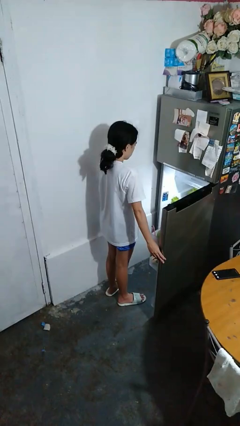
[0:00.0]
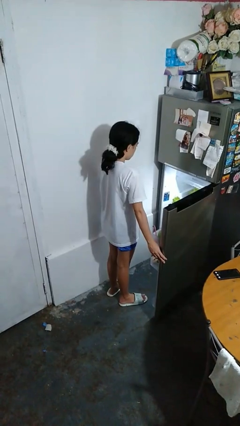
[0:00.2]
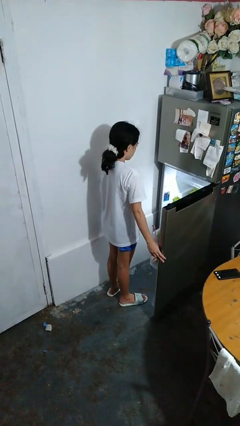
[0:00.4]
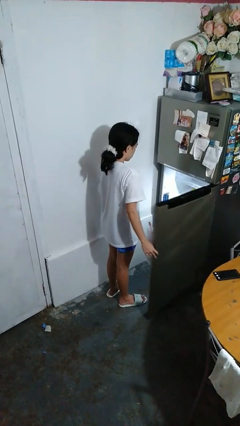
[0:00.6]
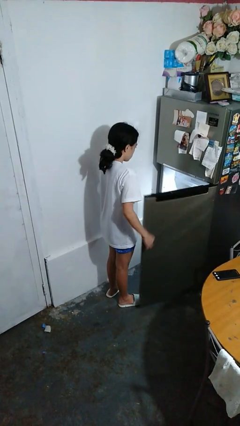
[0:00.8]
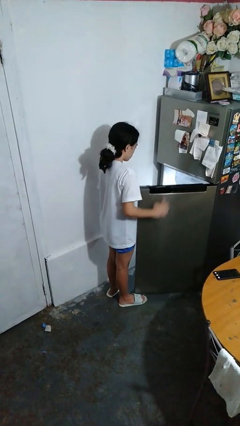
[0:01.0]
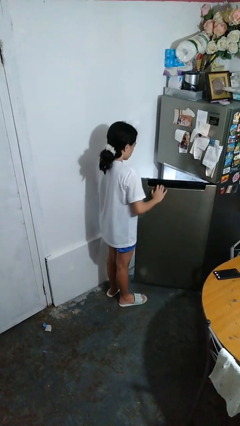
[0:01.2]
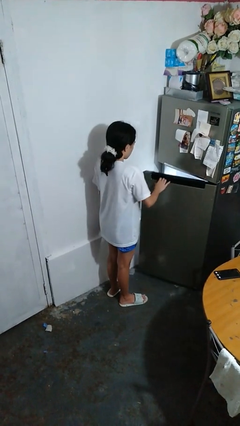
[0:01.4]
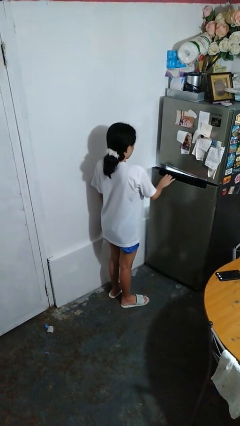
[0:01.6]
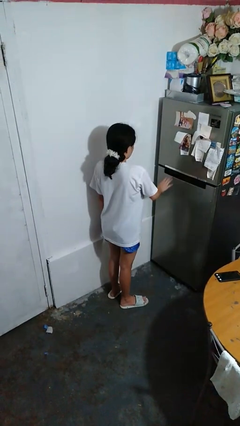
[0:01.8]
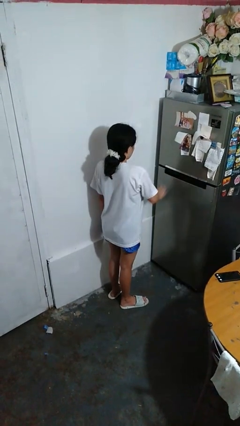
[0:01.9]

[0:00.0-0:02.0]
person closes refrigerator

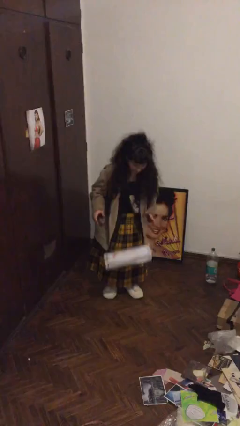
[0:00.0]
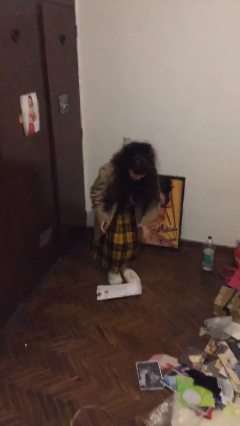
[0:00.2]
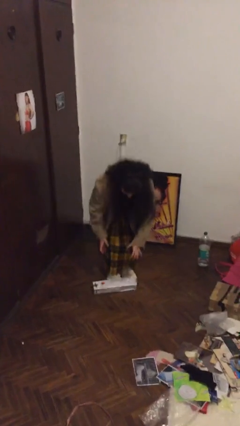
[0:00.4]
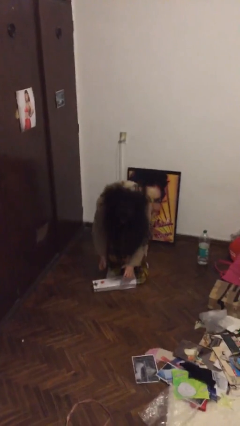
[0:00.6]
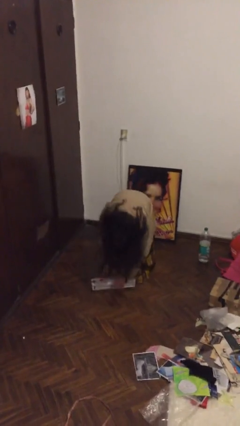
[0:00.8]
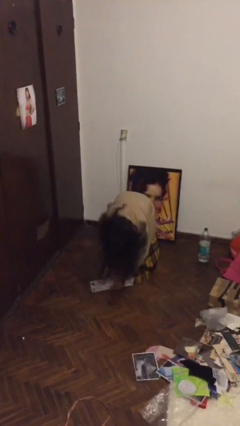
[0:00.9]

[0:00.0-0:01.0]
person drops object

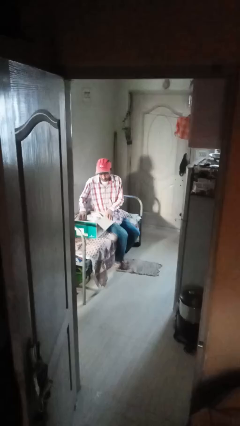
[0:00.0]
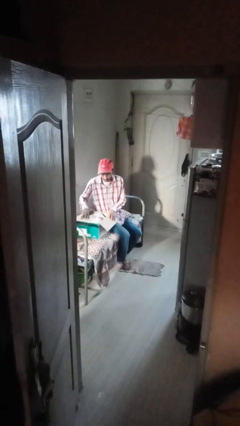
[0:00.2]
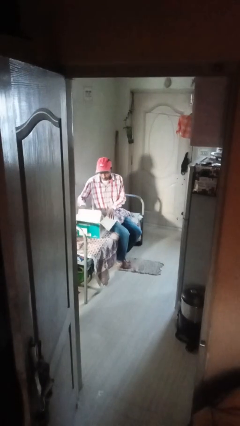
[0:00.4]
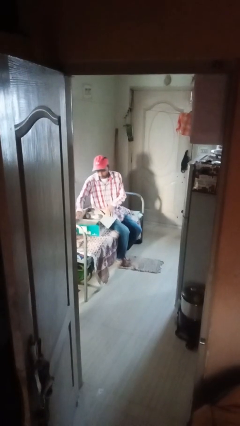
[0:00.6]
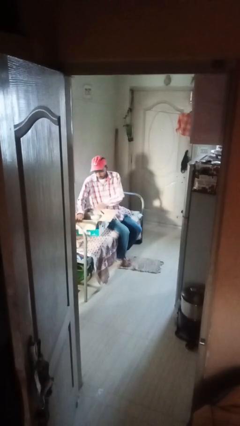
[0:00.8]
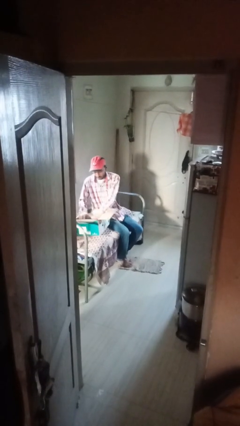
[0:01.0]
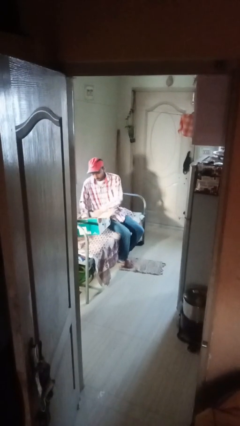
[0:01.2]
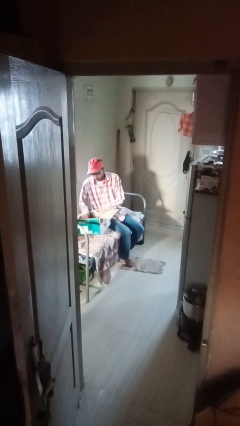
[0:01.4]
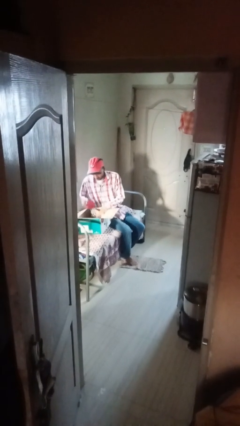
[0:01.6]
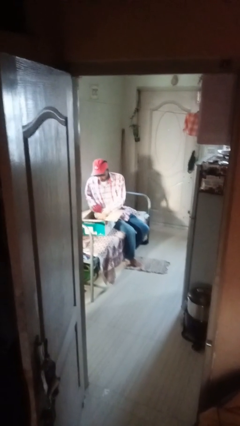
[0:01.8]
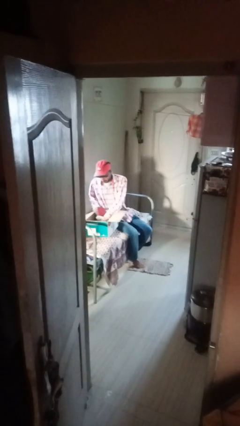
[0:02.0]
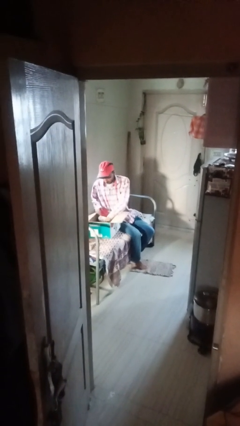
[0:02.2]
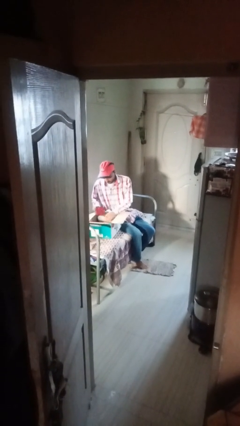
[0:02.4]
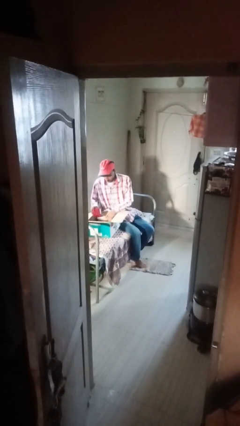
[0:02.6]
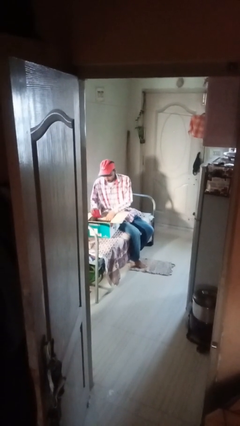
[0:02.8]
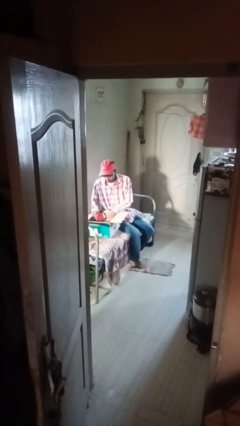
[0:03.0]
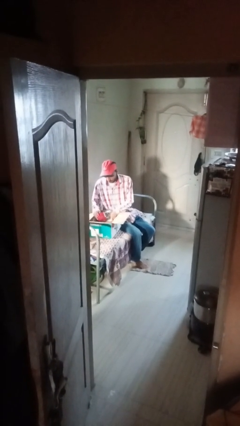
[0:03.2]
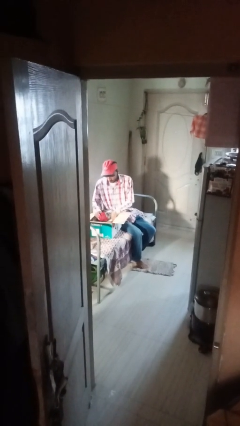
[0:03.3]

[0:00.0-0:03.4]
person searches in box

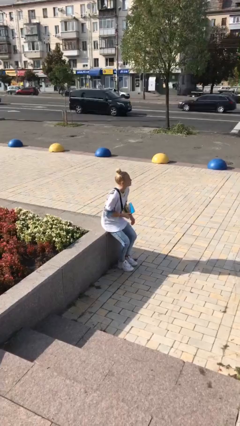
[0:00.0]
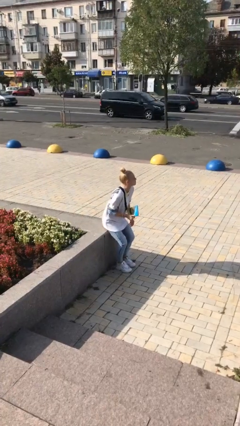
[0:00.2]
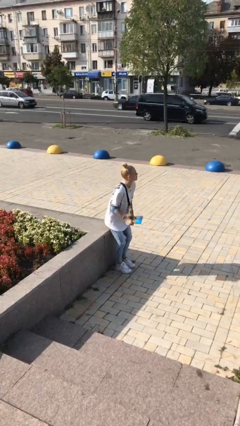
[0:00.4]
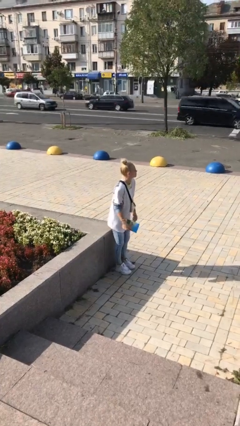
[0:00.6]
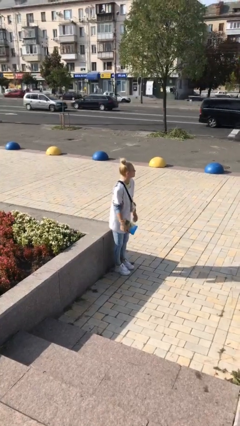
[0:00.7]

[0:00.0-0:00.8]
person stands up

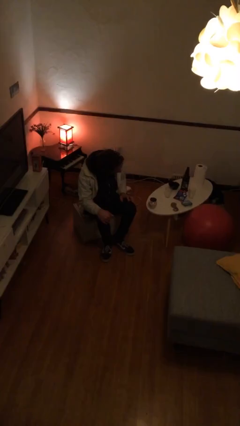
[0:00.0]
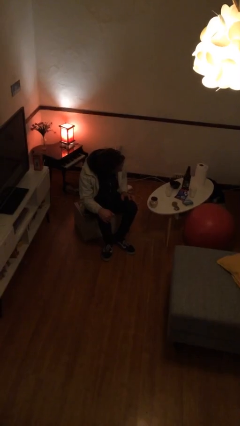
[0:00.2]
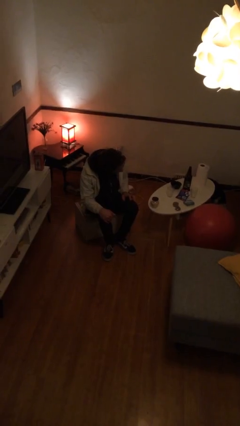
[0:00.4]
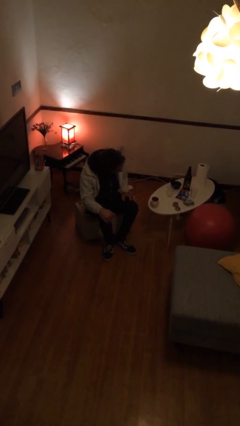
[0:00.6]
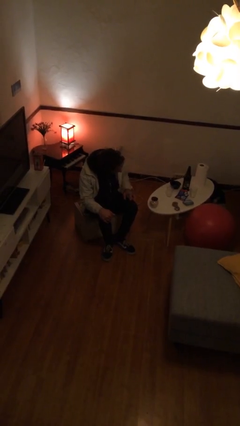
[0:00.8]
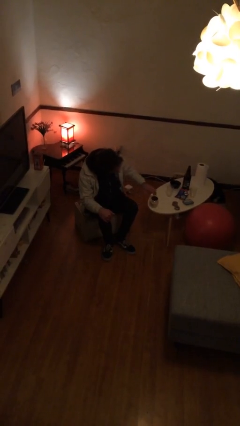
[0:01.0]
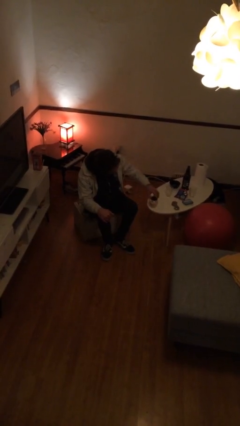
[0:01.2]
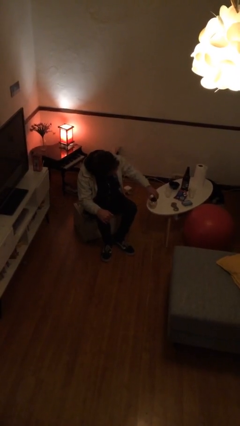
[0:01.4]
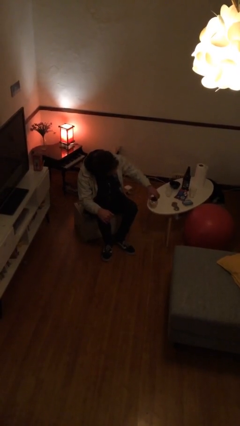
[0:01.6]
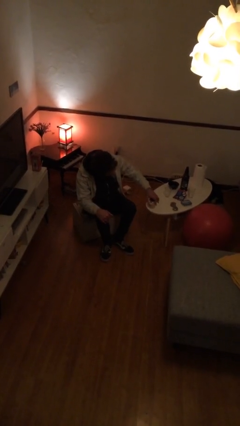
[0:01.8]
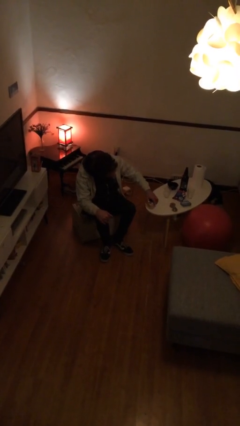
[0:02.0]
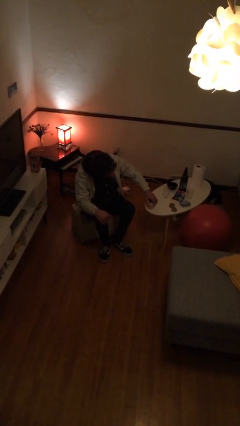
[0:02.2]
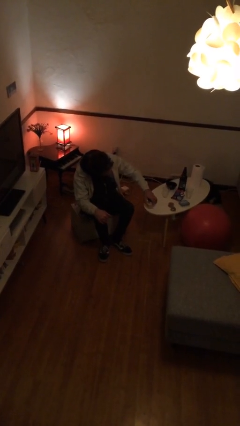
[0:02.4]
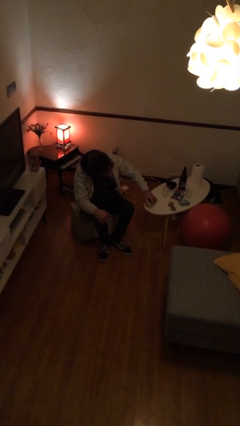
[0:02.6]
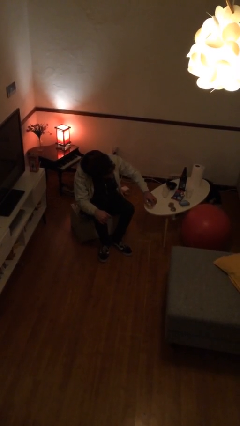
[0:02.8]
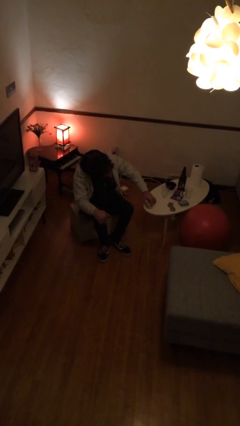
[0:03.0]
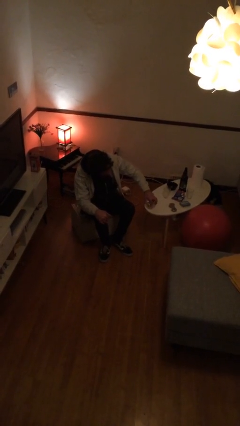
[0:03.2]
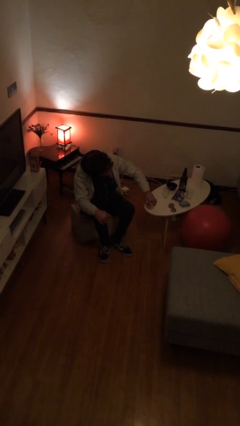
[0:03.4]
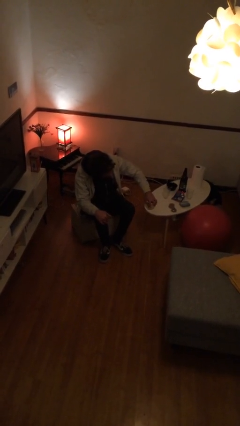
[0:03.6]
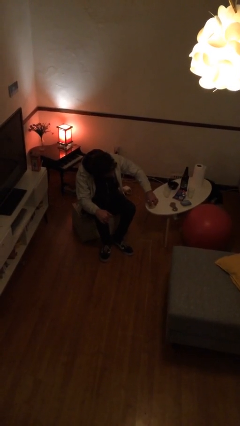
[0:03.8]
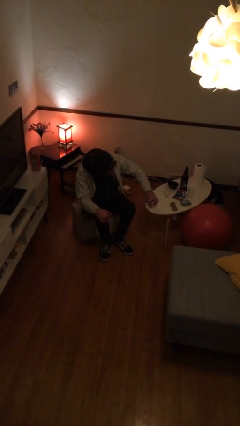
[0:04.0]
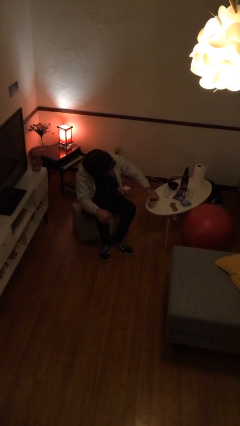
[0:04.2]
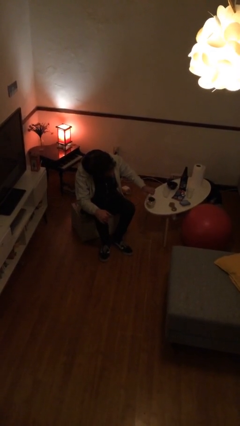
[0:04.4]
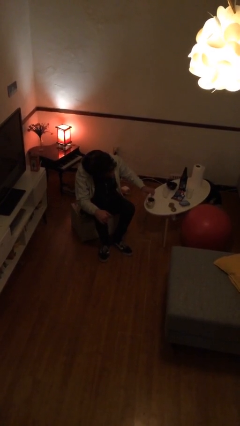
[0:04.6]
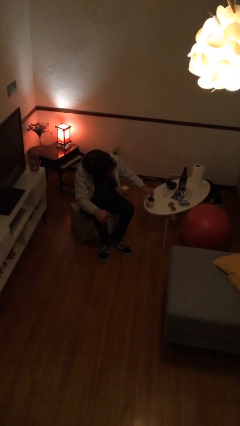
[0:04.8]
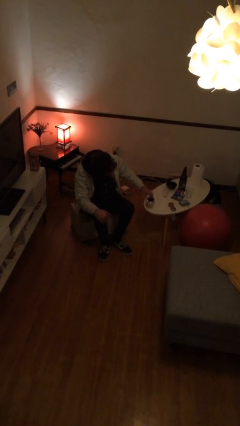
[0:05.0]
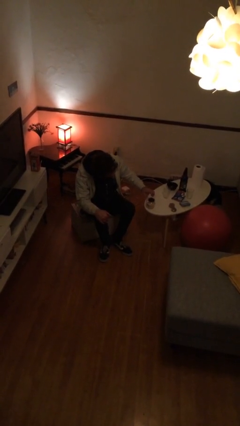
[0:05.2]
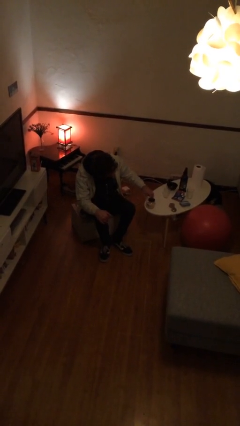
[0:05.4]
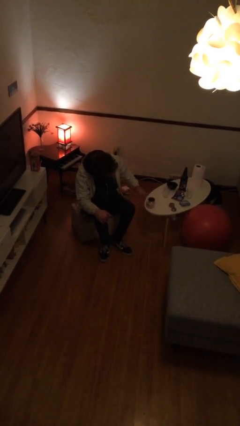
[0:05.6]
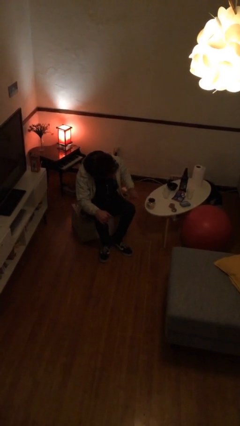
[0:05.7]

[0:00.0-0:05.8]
person taps object with finger

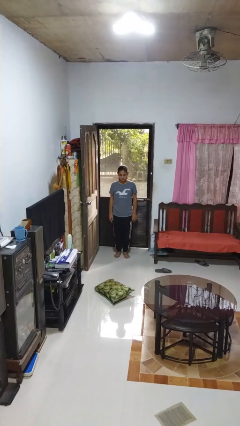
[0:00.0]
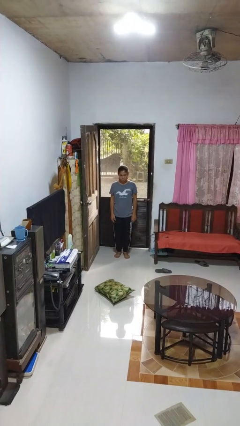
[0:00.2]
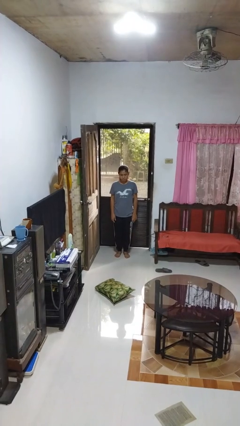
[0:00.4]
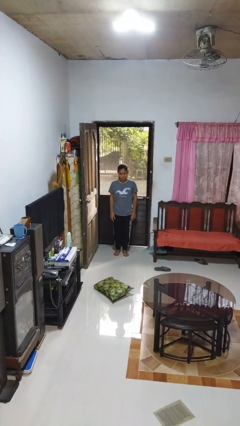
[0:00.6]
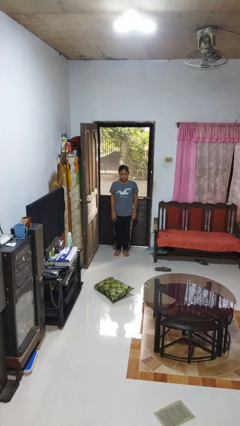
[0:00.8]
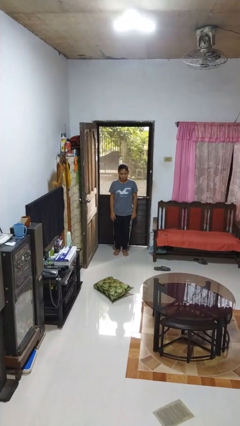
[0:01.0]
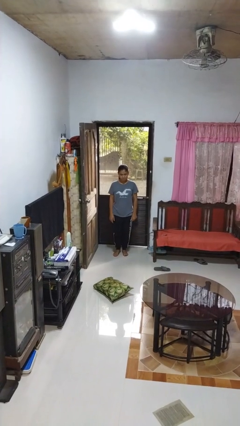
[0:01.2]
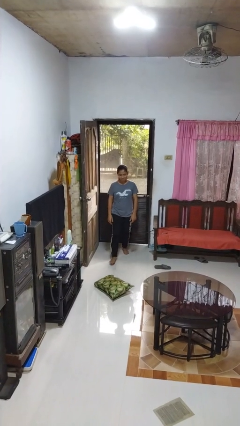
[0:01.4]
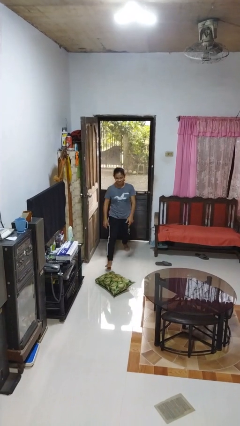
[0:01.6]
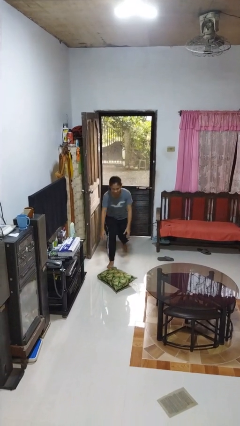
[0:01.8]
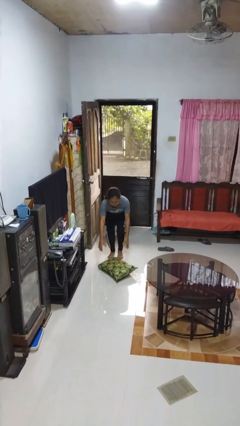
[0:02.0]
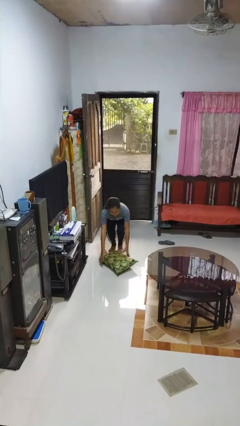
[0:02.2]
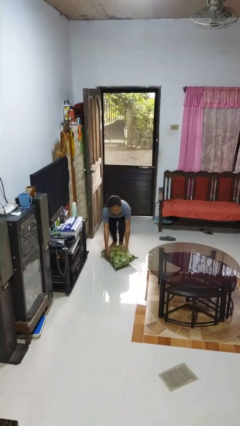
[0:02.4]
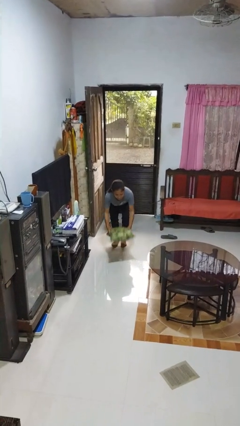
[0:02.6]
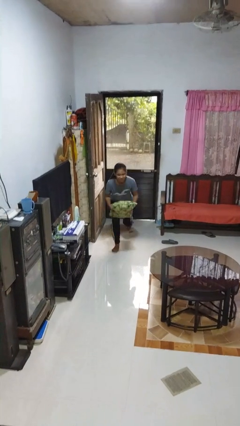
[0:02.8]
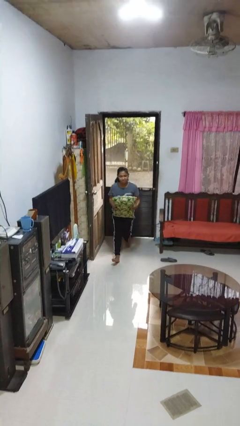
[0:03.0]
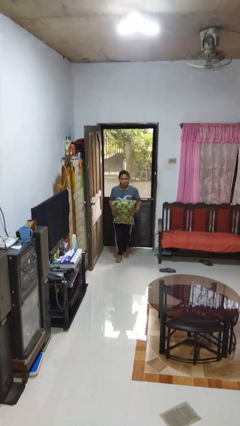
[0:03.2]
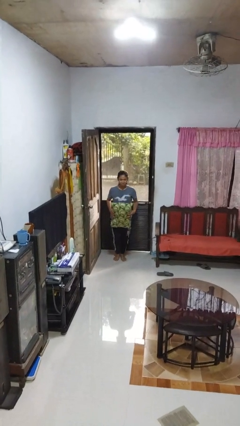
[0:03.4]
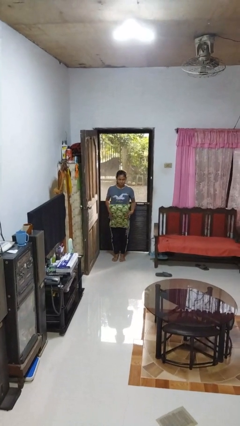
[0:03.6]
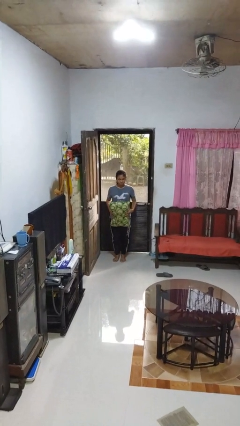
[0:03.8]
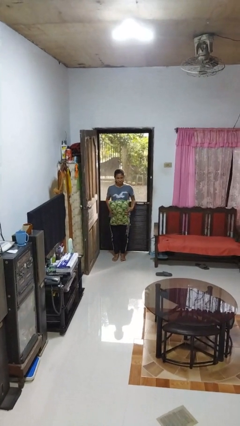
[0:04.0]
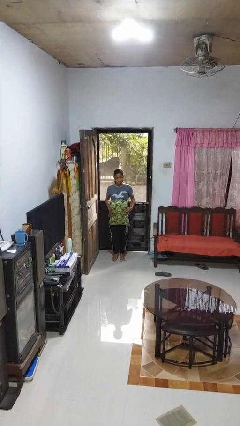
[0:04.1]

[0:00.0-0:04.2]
person picks up object from floor

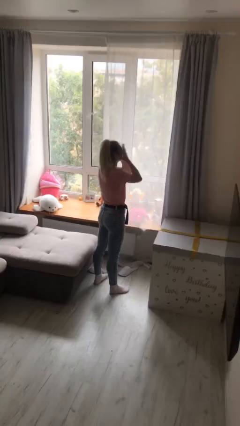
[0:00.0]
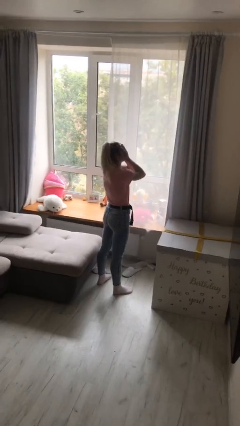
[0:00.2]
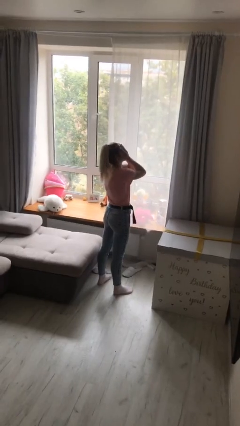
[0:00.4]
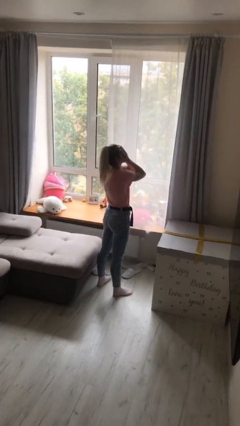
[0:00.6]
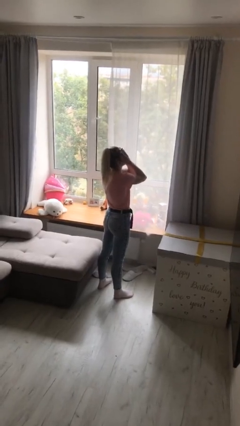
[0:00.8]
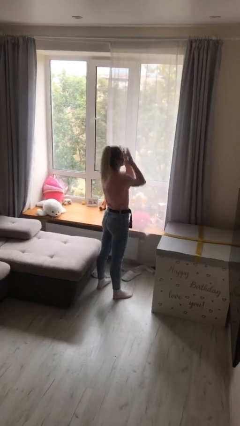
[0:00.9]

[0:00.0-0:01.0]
person covers face with hands
